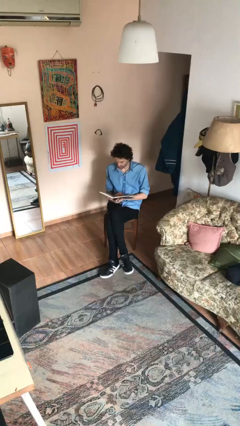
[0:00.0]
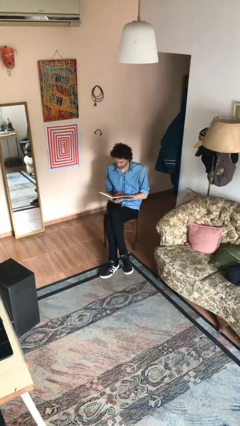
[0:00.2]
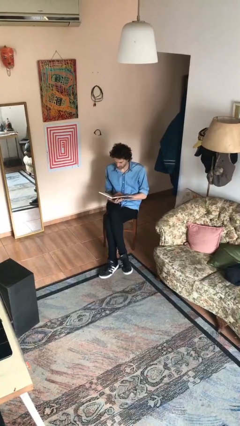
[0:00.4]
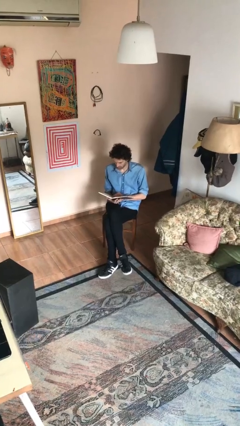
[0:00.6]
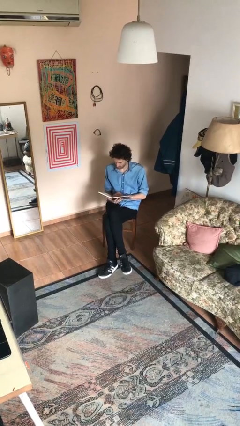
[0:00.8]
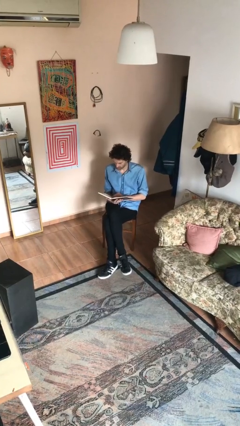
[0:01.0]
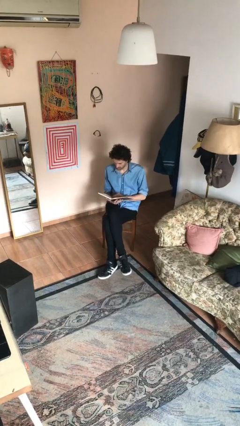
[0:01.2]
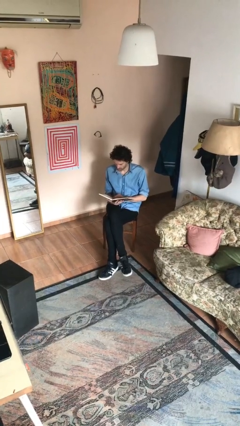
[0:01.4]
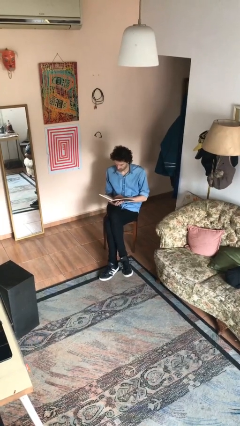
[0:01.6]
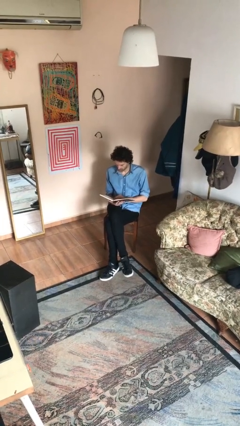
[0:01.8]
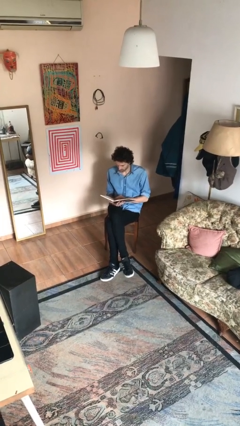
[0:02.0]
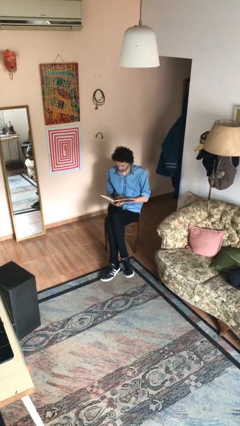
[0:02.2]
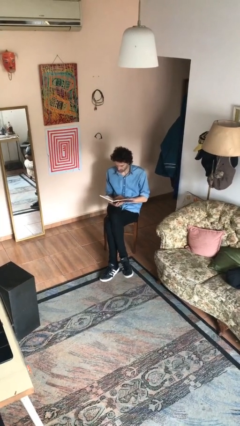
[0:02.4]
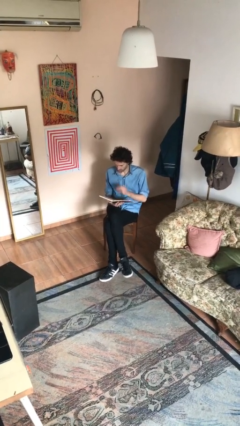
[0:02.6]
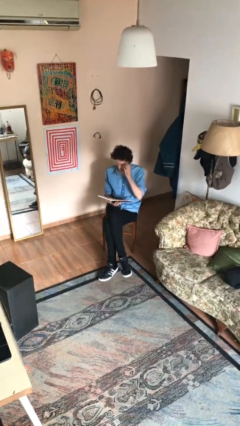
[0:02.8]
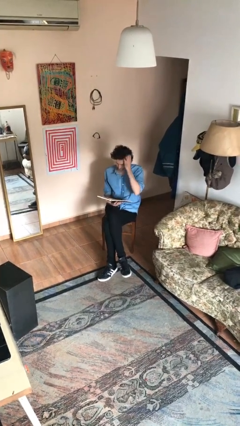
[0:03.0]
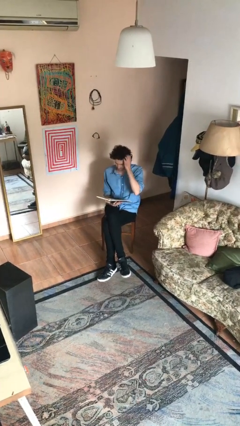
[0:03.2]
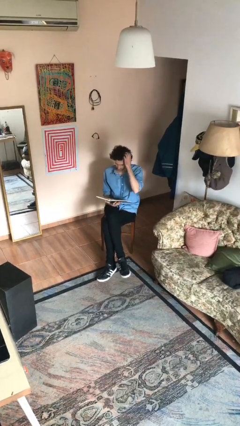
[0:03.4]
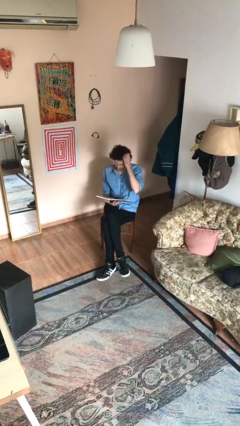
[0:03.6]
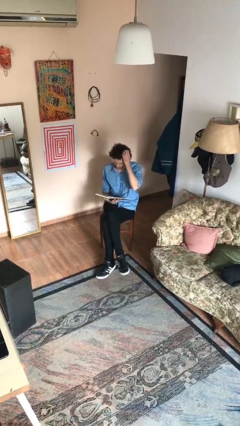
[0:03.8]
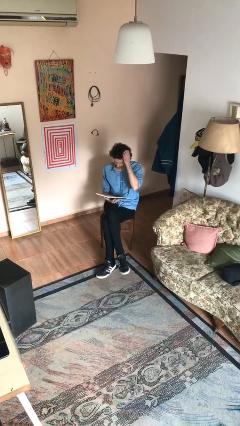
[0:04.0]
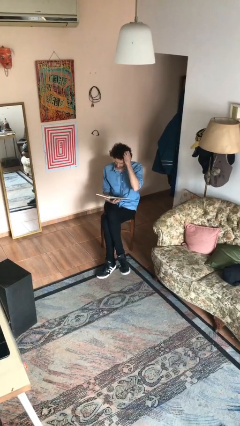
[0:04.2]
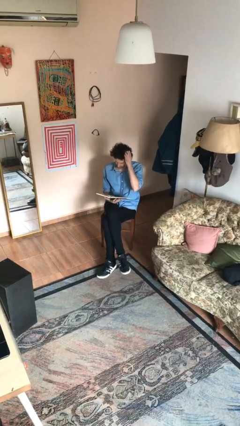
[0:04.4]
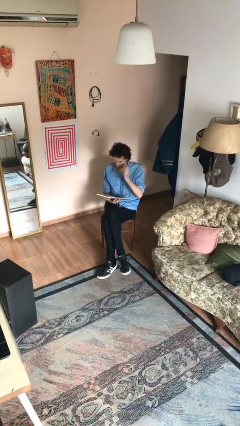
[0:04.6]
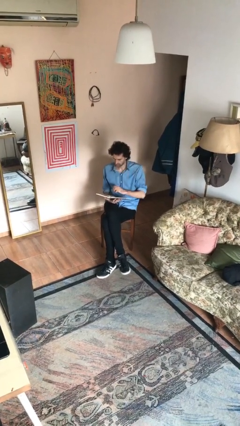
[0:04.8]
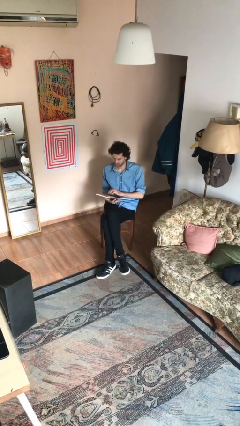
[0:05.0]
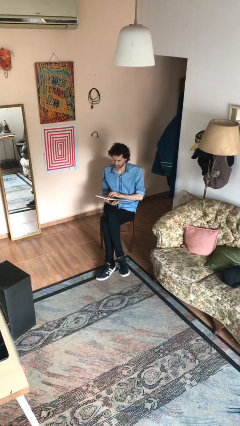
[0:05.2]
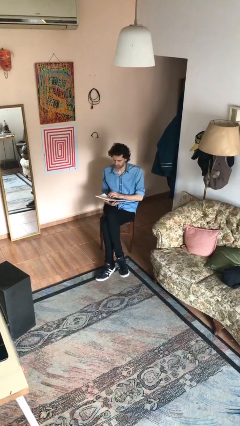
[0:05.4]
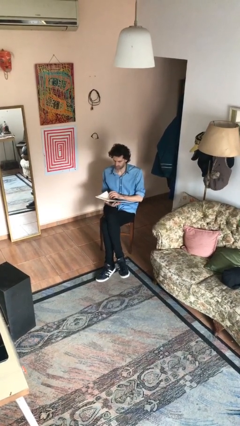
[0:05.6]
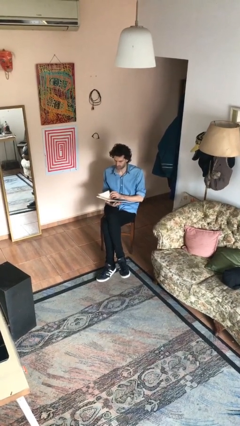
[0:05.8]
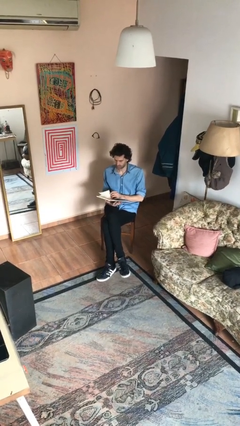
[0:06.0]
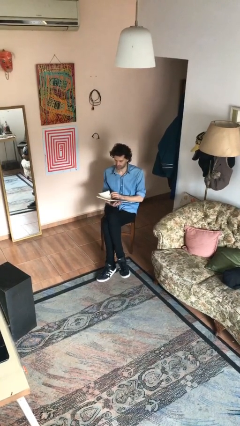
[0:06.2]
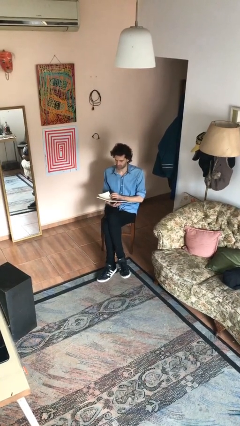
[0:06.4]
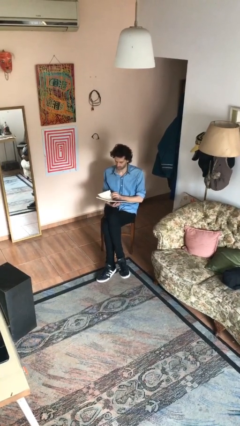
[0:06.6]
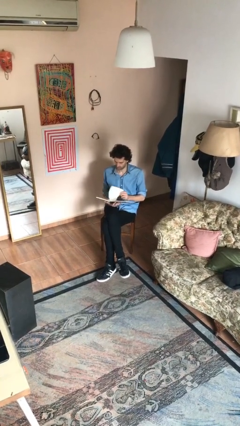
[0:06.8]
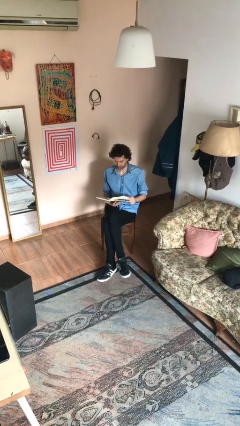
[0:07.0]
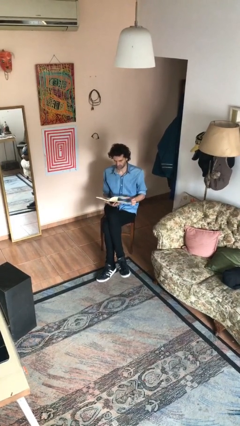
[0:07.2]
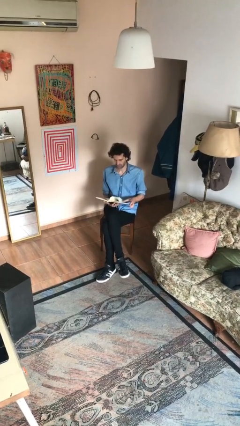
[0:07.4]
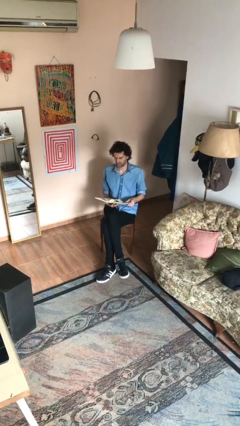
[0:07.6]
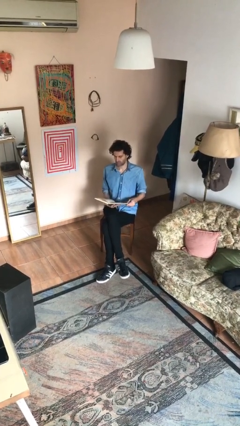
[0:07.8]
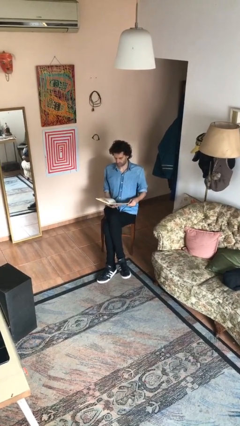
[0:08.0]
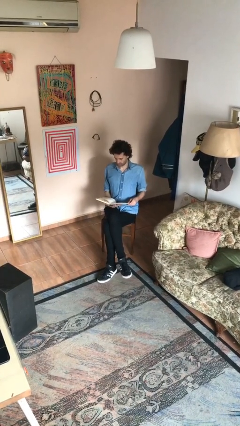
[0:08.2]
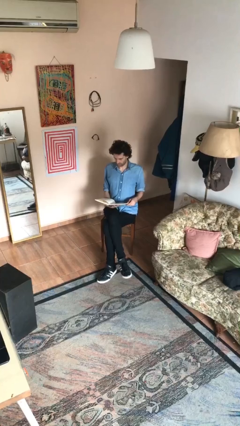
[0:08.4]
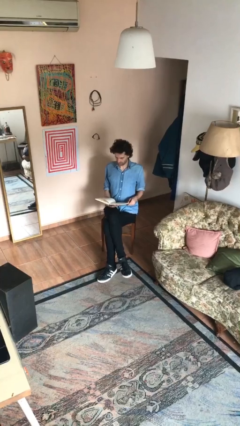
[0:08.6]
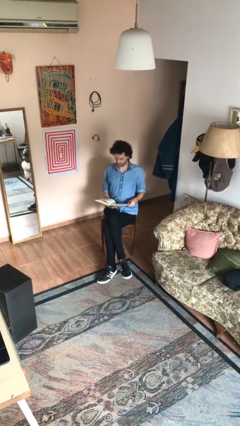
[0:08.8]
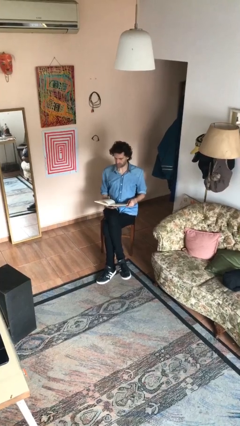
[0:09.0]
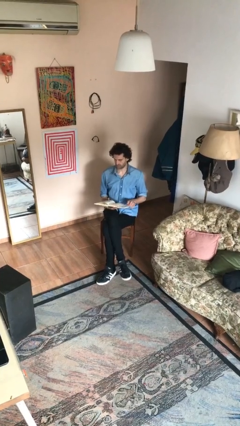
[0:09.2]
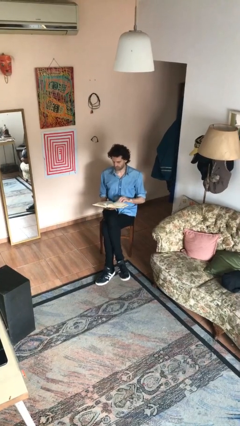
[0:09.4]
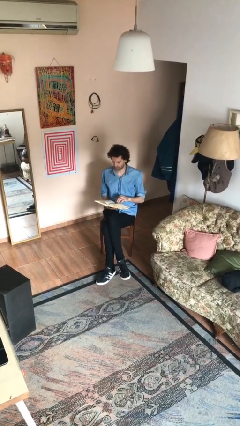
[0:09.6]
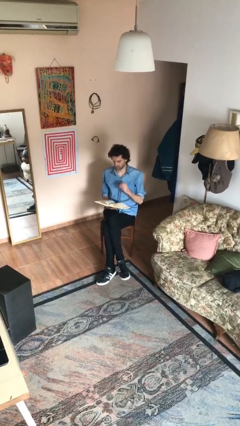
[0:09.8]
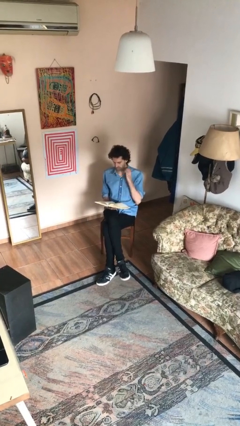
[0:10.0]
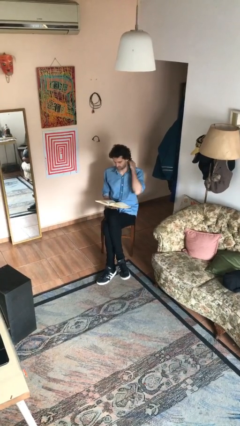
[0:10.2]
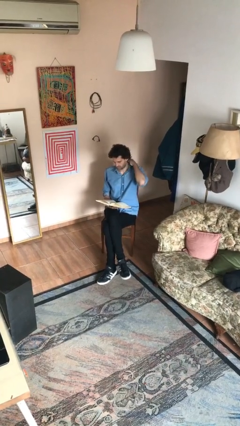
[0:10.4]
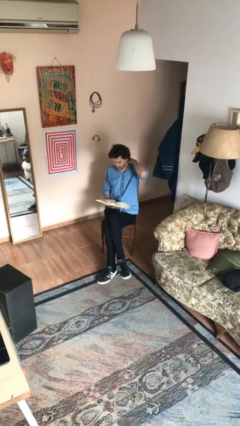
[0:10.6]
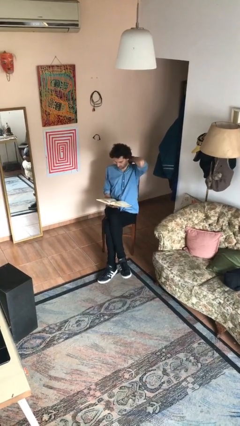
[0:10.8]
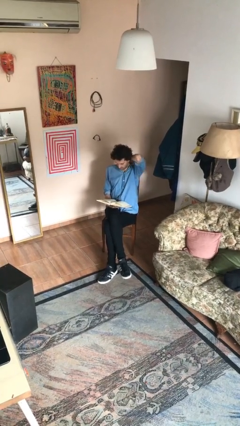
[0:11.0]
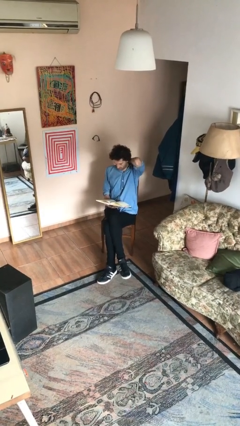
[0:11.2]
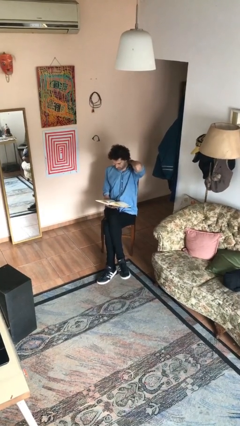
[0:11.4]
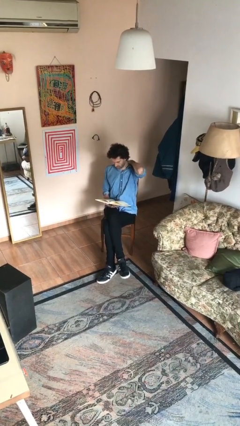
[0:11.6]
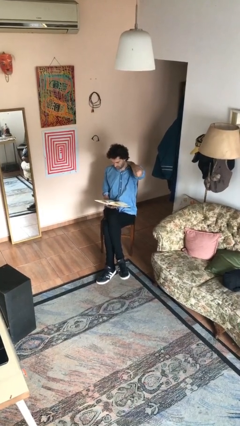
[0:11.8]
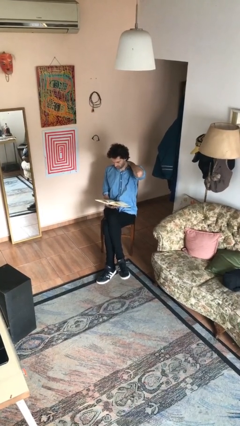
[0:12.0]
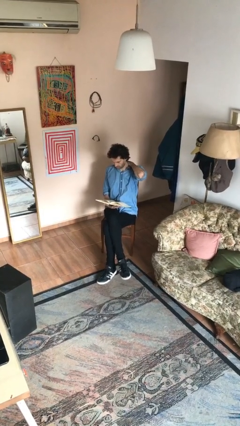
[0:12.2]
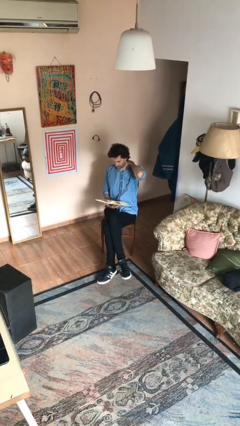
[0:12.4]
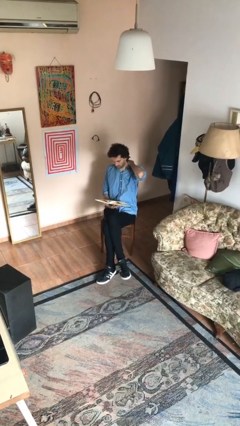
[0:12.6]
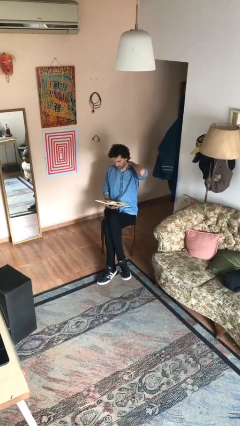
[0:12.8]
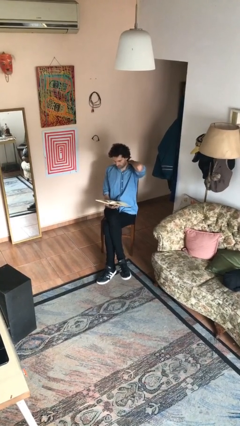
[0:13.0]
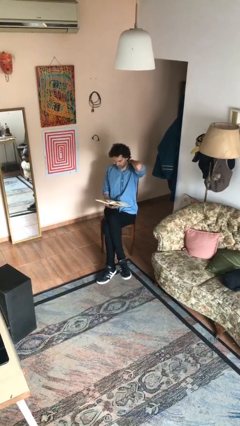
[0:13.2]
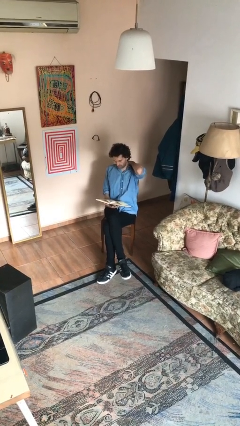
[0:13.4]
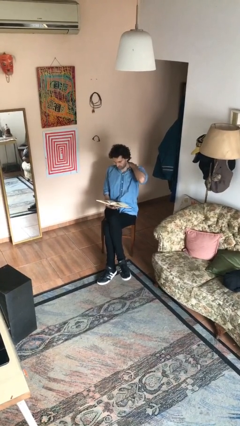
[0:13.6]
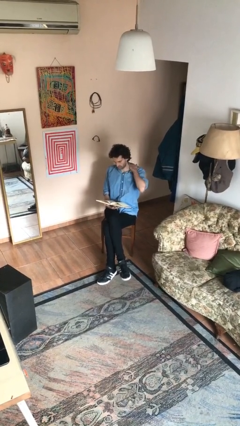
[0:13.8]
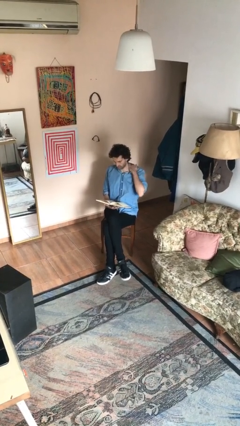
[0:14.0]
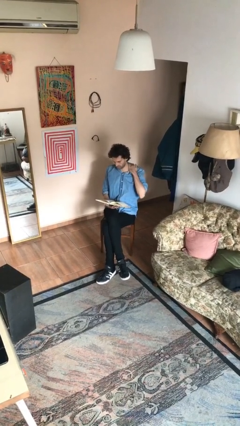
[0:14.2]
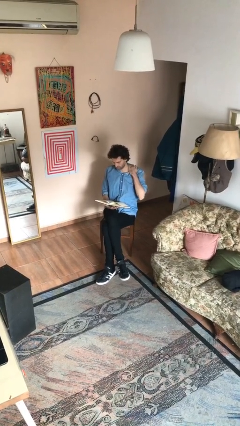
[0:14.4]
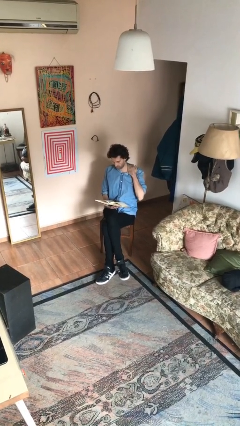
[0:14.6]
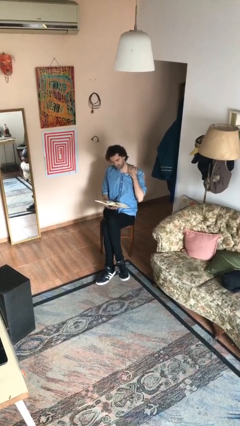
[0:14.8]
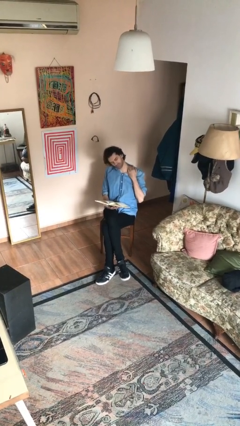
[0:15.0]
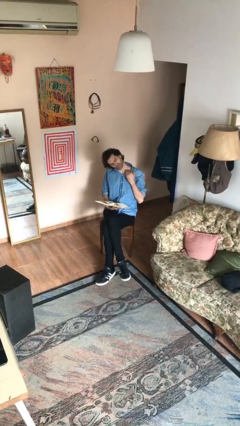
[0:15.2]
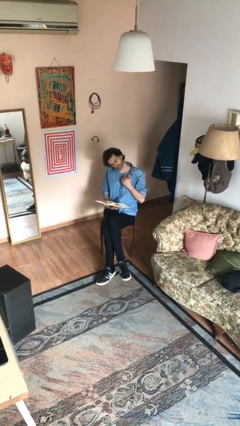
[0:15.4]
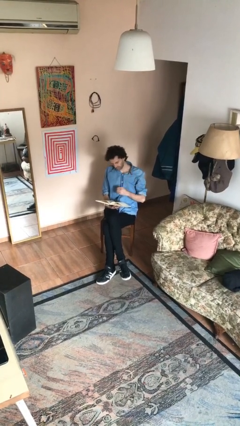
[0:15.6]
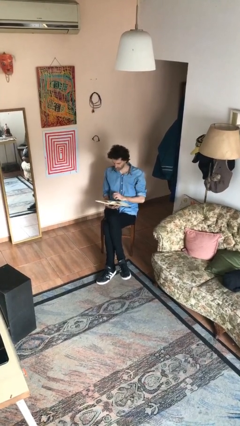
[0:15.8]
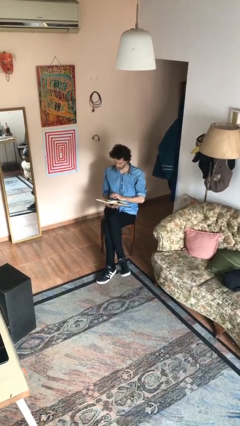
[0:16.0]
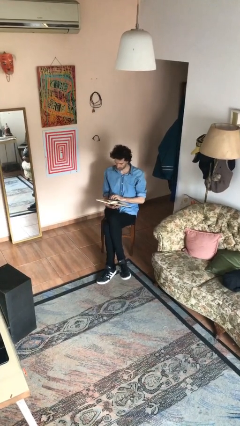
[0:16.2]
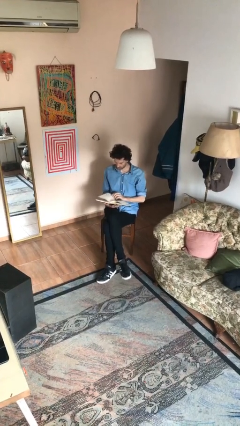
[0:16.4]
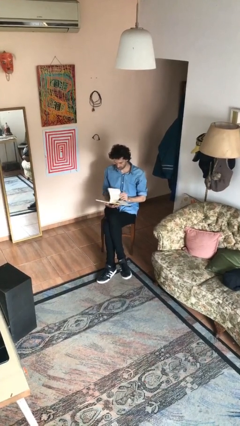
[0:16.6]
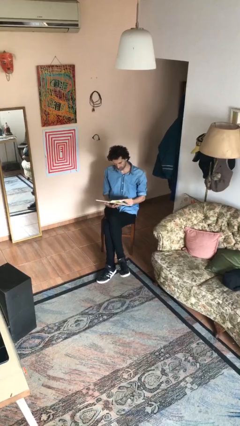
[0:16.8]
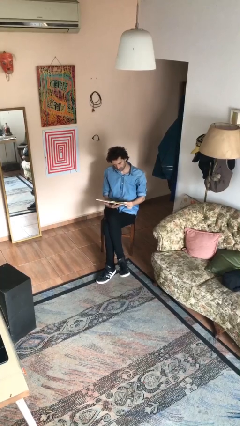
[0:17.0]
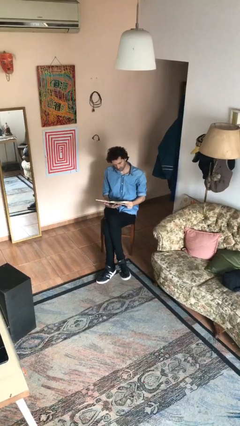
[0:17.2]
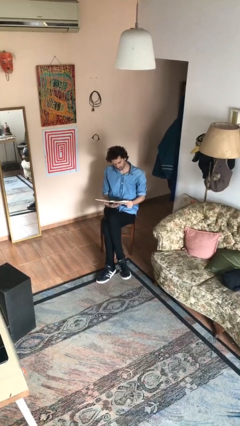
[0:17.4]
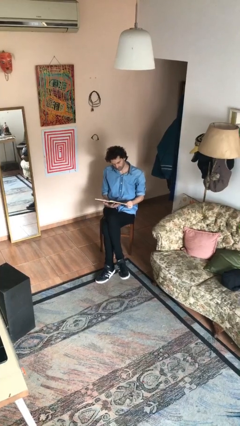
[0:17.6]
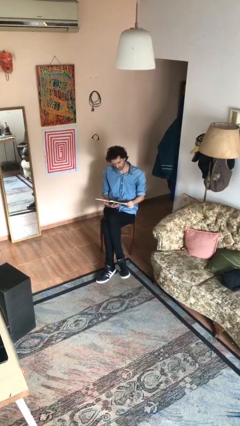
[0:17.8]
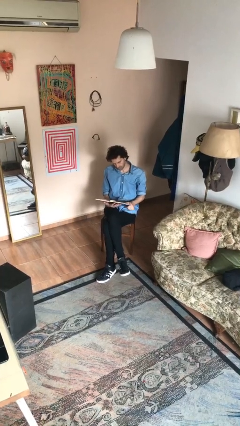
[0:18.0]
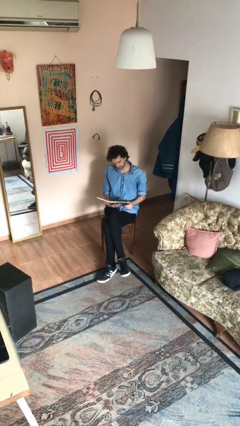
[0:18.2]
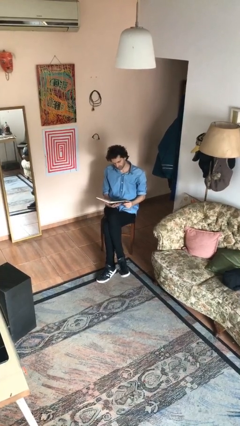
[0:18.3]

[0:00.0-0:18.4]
person reads document
